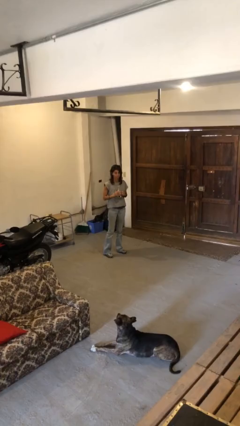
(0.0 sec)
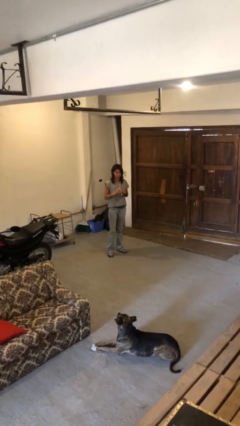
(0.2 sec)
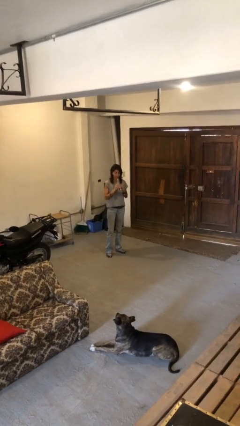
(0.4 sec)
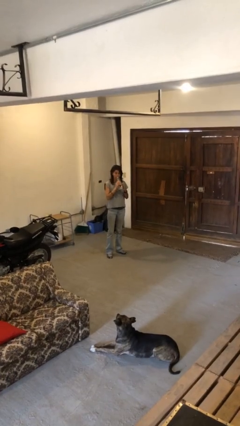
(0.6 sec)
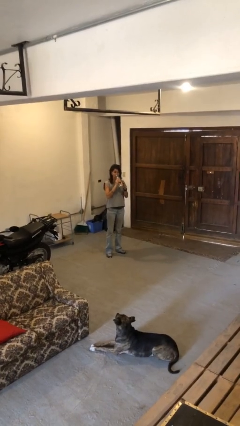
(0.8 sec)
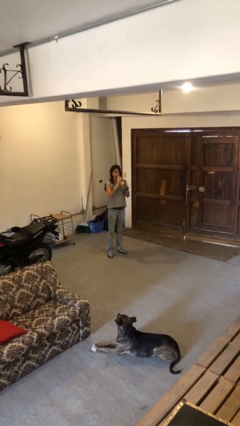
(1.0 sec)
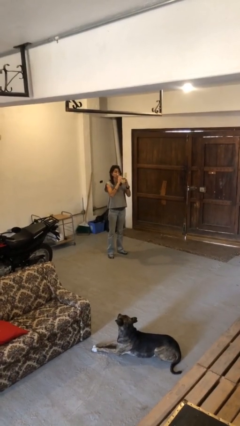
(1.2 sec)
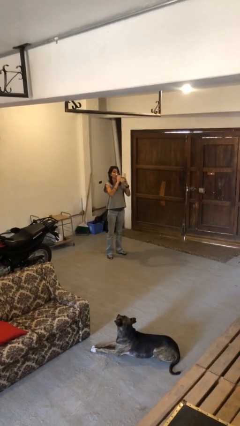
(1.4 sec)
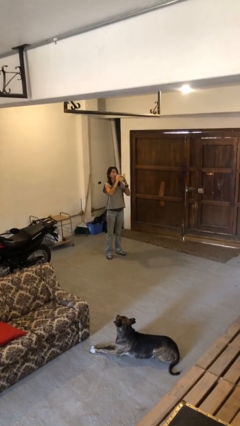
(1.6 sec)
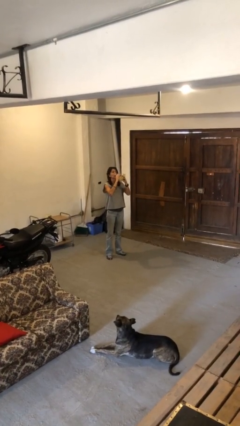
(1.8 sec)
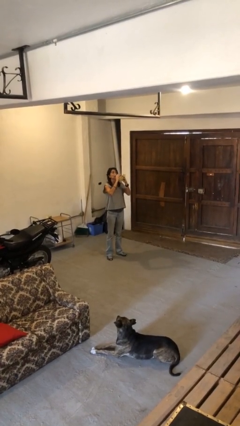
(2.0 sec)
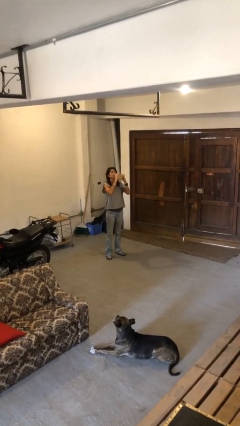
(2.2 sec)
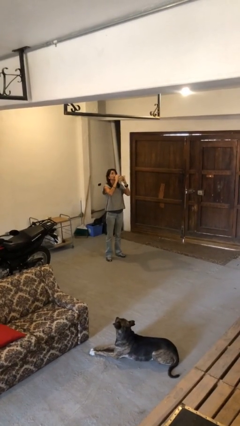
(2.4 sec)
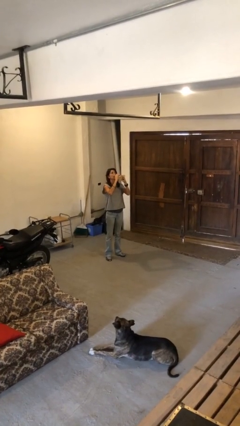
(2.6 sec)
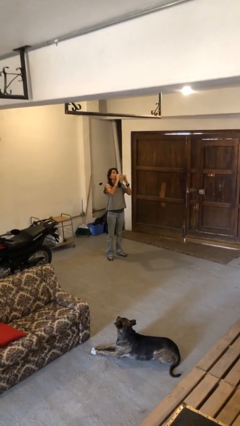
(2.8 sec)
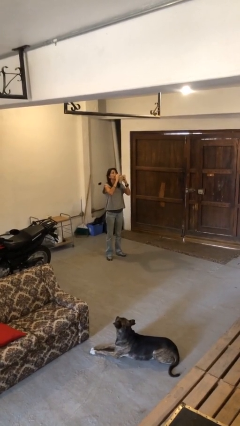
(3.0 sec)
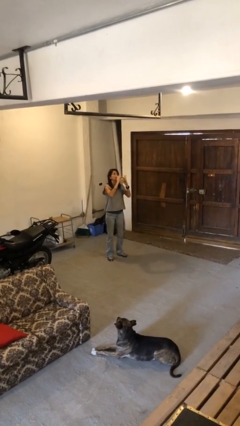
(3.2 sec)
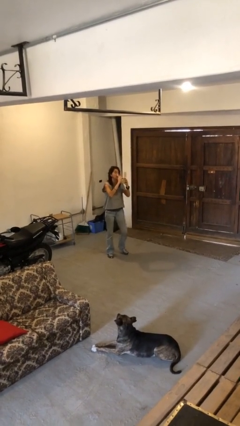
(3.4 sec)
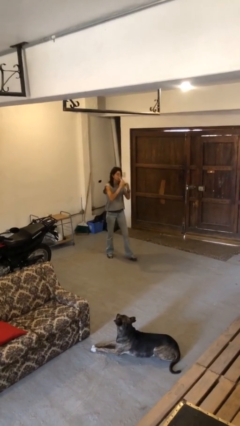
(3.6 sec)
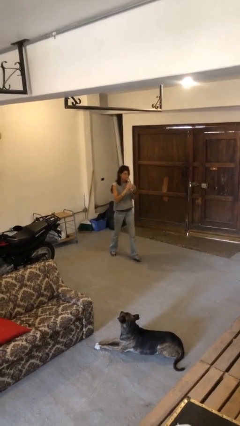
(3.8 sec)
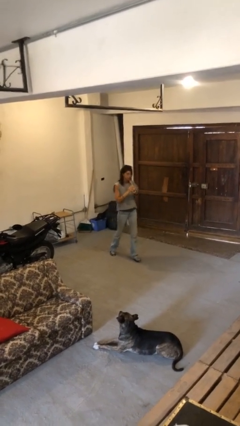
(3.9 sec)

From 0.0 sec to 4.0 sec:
person drinks from bottle

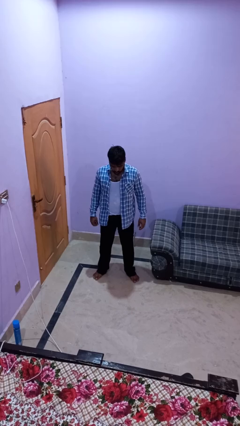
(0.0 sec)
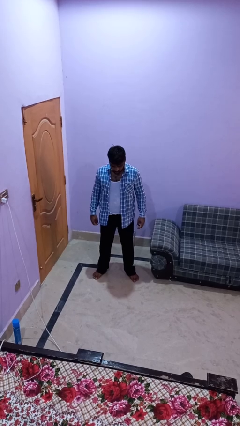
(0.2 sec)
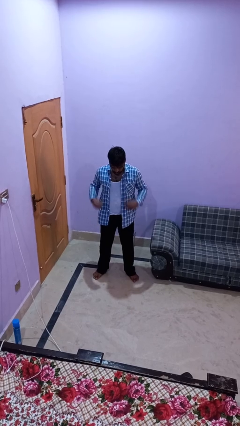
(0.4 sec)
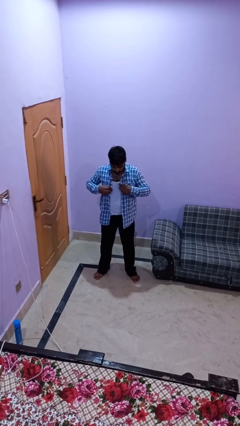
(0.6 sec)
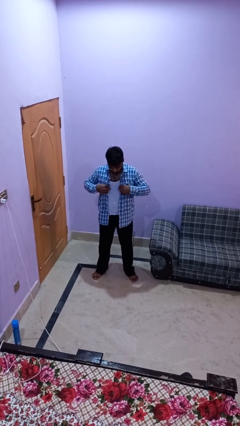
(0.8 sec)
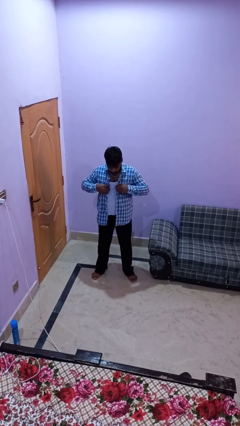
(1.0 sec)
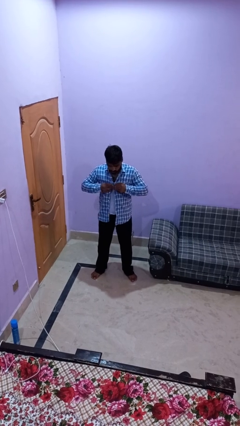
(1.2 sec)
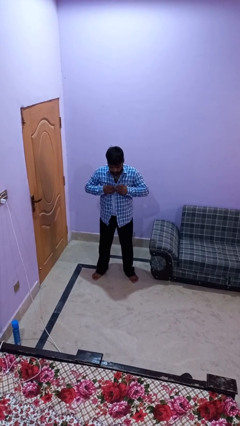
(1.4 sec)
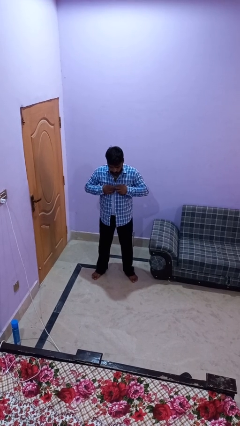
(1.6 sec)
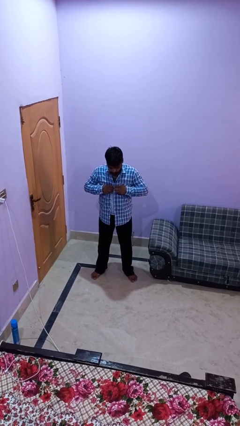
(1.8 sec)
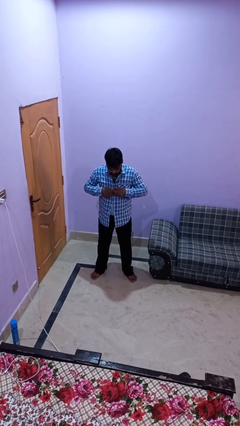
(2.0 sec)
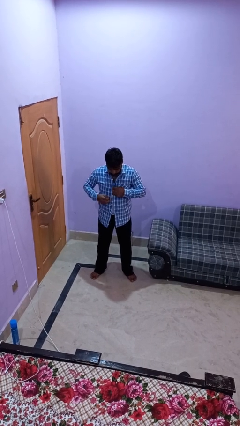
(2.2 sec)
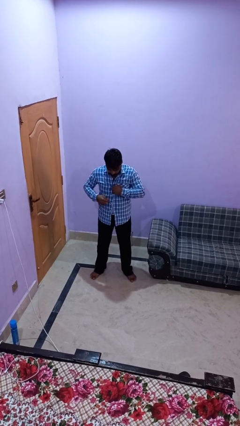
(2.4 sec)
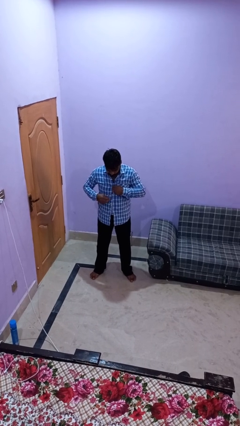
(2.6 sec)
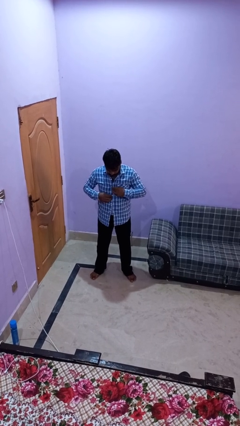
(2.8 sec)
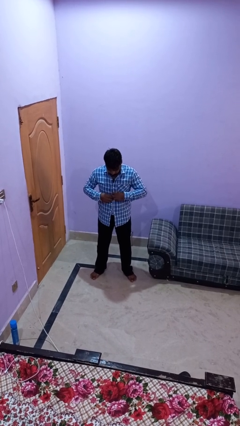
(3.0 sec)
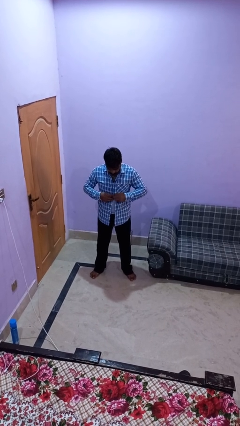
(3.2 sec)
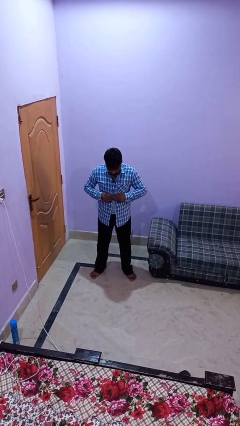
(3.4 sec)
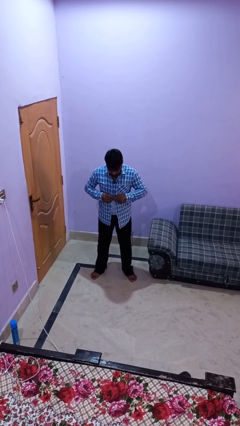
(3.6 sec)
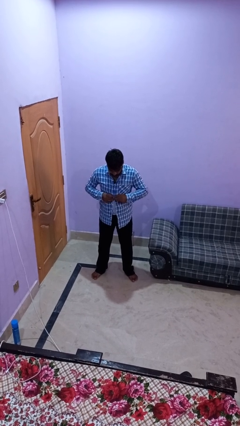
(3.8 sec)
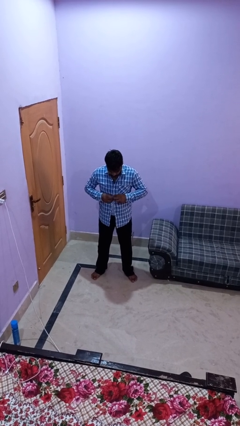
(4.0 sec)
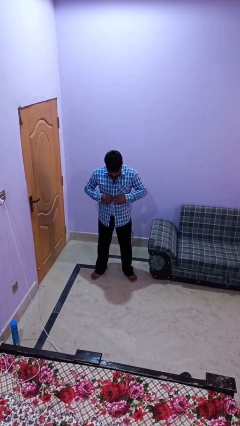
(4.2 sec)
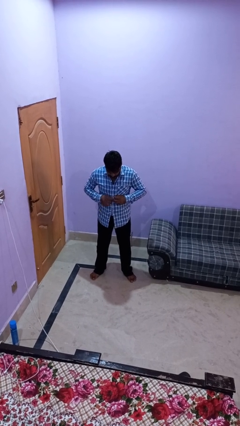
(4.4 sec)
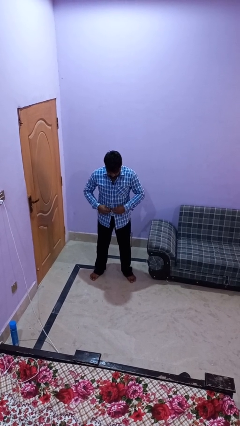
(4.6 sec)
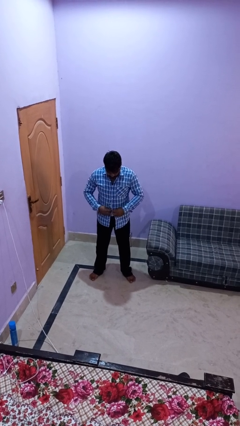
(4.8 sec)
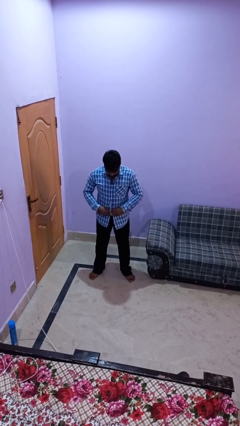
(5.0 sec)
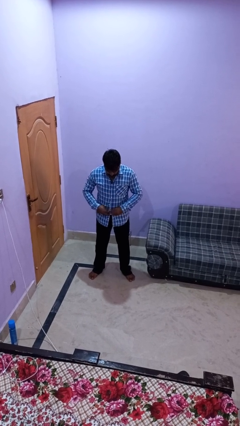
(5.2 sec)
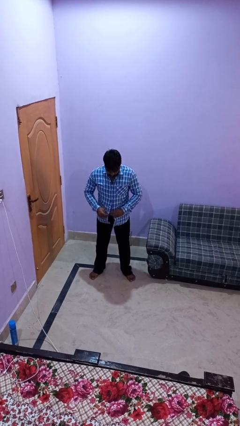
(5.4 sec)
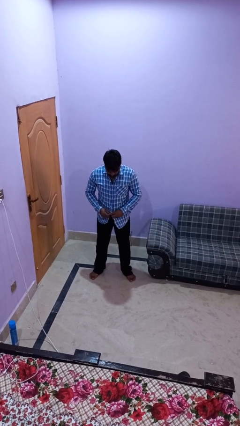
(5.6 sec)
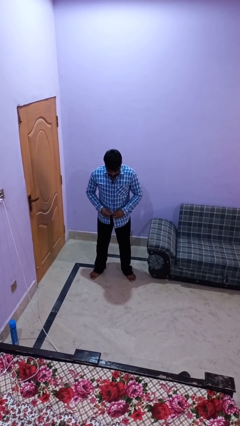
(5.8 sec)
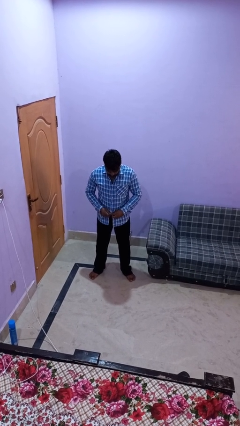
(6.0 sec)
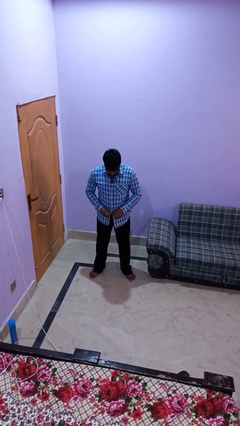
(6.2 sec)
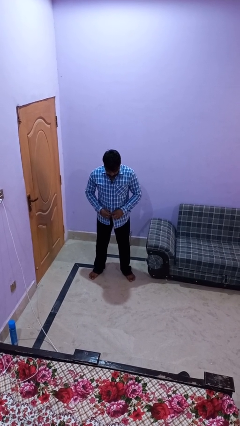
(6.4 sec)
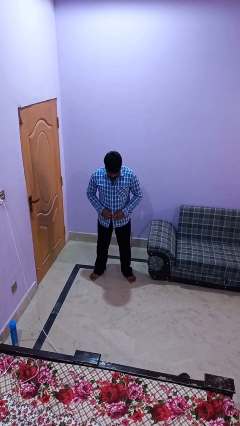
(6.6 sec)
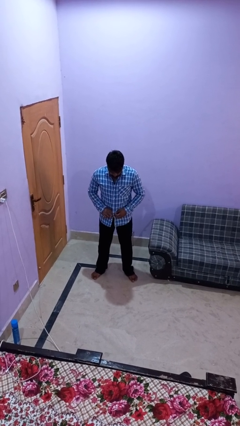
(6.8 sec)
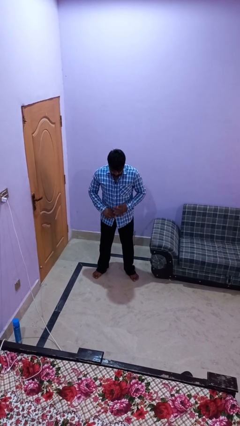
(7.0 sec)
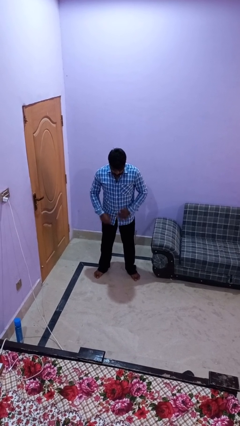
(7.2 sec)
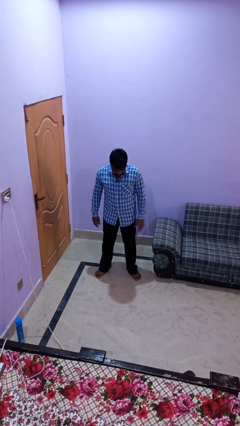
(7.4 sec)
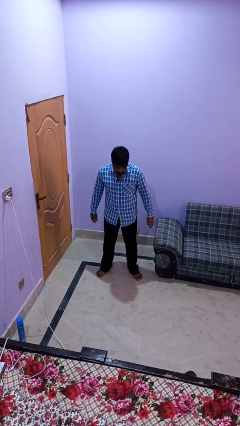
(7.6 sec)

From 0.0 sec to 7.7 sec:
person buttons shirt

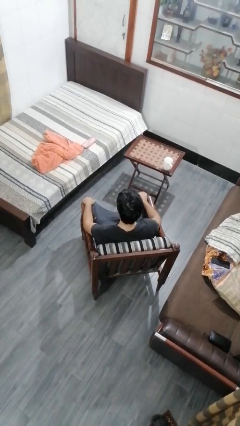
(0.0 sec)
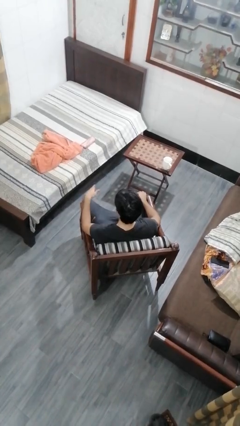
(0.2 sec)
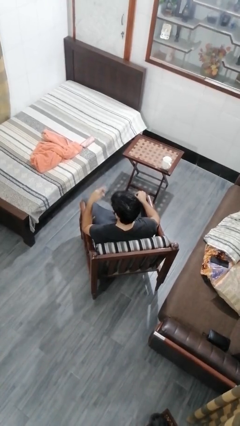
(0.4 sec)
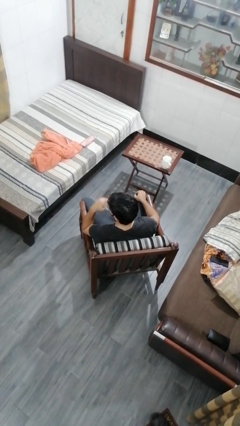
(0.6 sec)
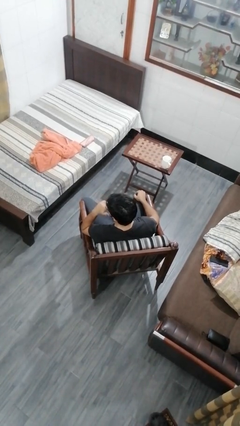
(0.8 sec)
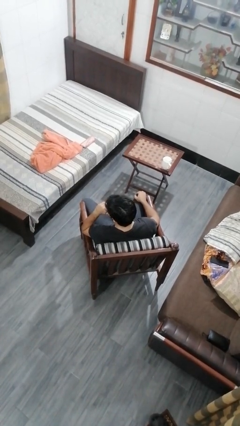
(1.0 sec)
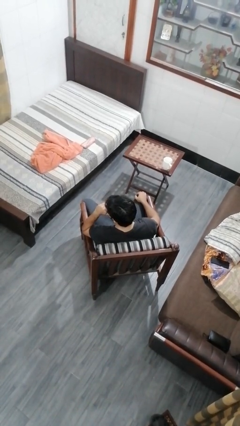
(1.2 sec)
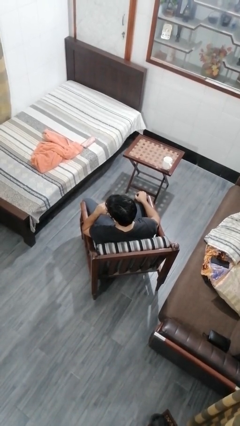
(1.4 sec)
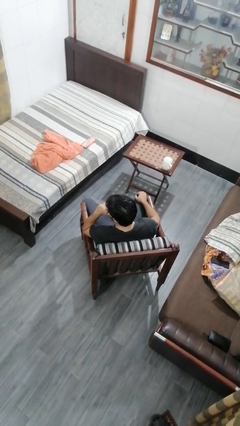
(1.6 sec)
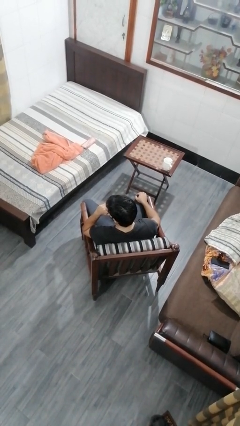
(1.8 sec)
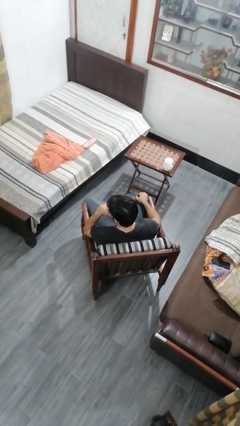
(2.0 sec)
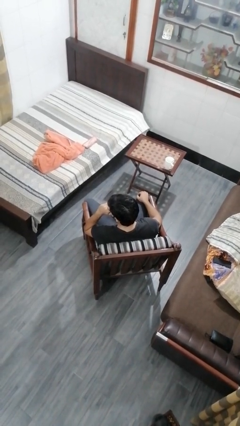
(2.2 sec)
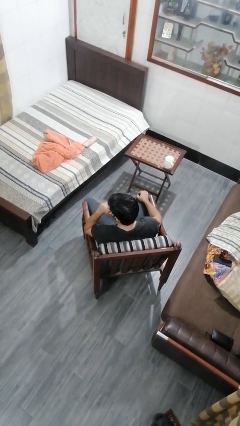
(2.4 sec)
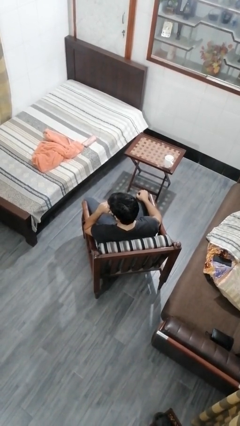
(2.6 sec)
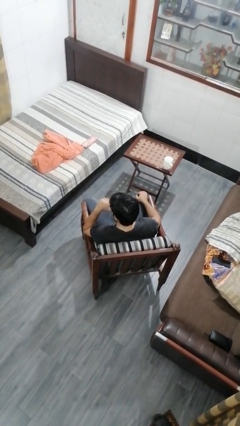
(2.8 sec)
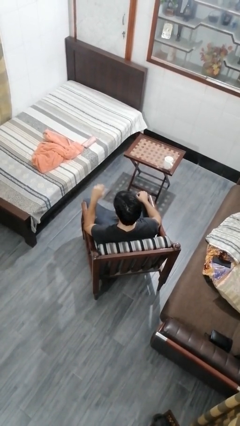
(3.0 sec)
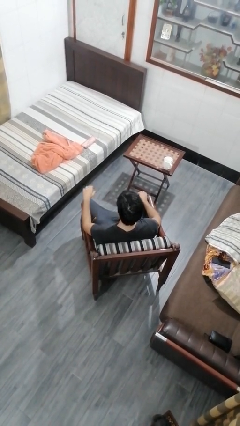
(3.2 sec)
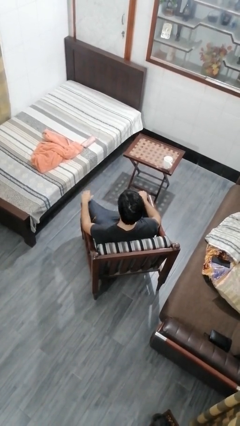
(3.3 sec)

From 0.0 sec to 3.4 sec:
person strokes chin

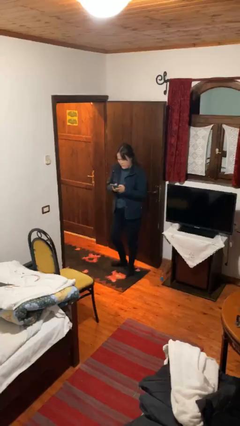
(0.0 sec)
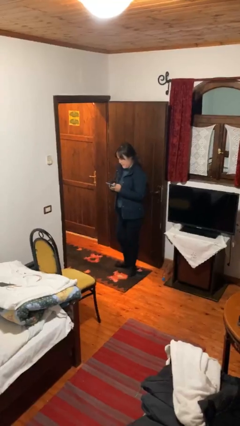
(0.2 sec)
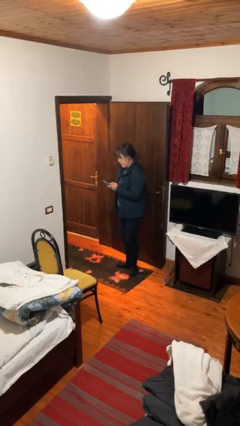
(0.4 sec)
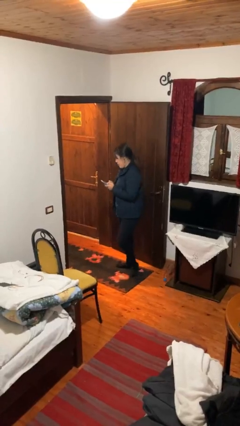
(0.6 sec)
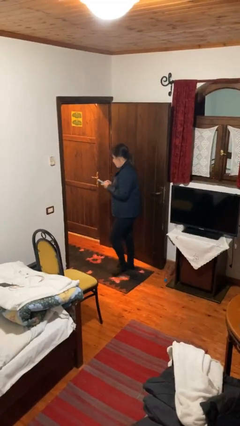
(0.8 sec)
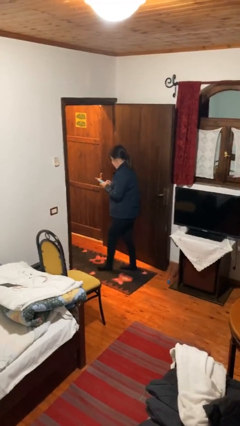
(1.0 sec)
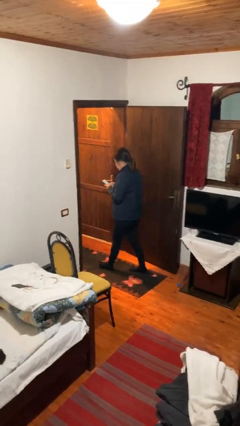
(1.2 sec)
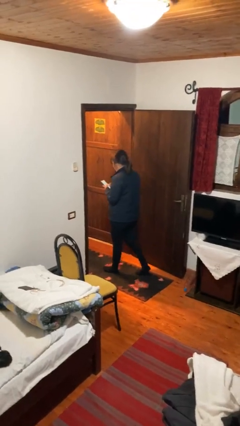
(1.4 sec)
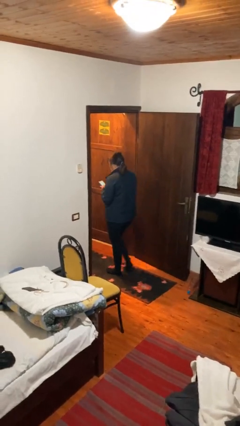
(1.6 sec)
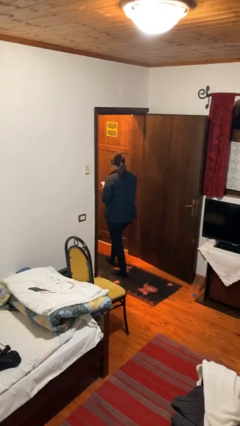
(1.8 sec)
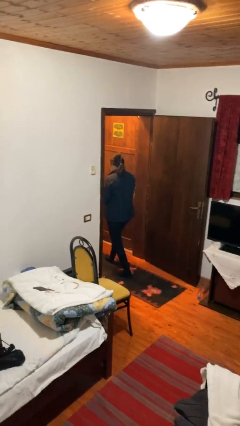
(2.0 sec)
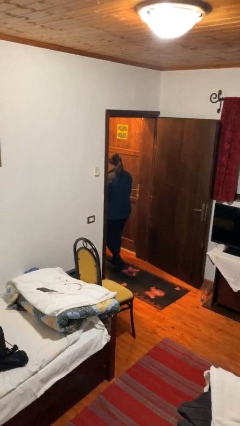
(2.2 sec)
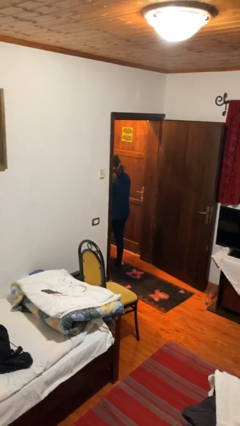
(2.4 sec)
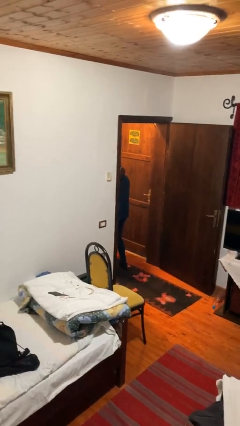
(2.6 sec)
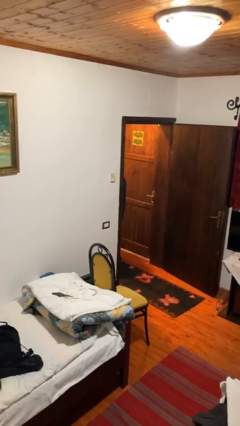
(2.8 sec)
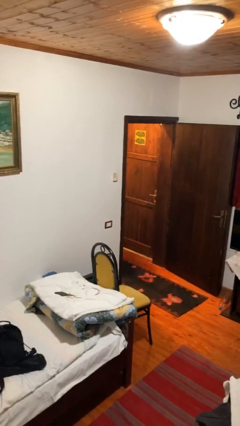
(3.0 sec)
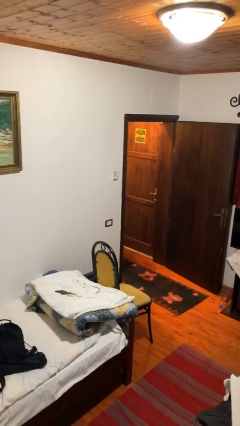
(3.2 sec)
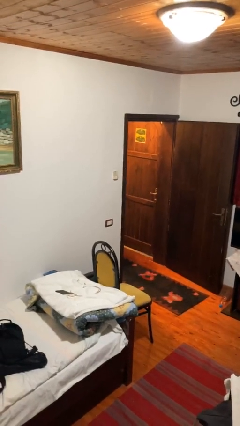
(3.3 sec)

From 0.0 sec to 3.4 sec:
person exits scene through structure
